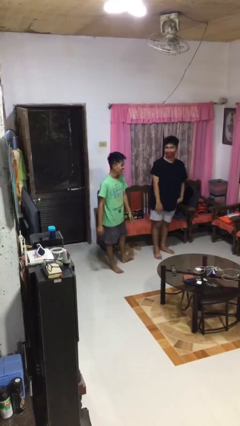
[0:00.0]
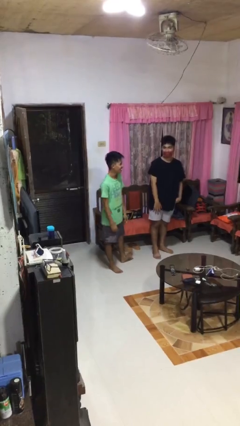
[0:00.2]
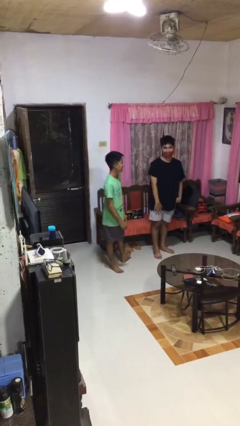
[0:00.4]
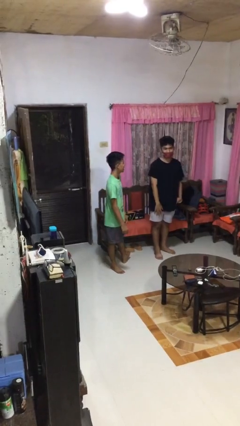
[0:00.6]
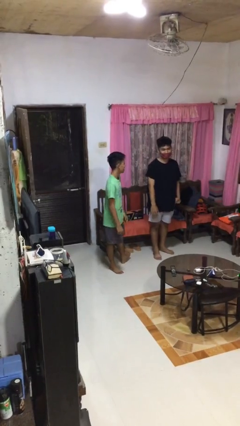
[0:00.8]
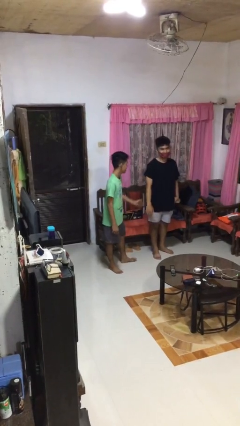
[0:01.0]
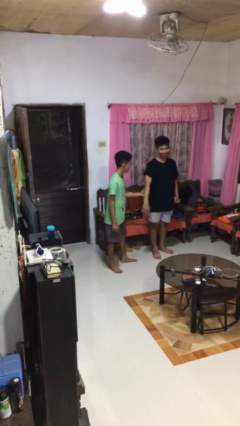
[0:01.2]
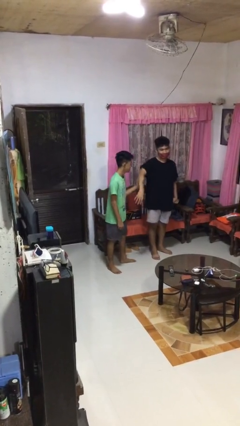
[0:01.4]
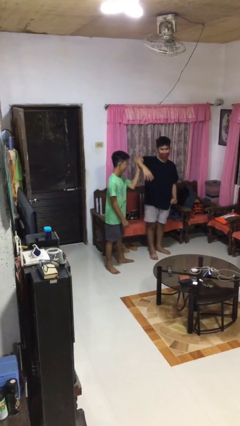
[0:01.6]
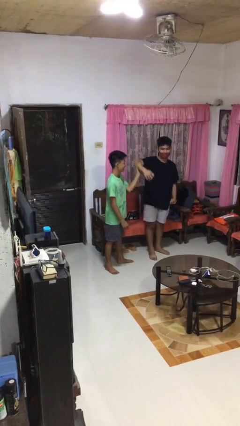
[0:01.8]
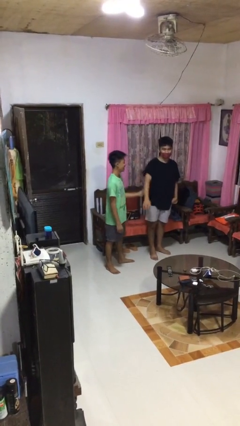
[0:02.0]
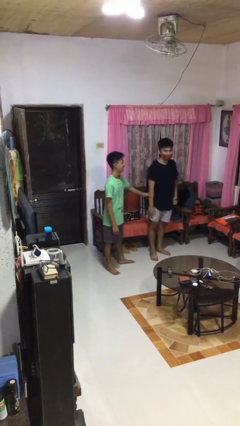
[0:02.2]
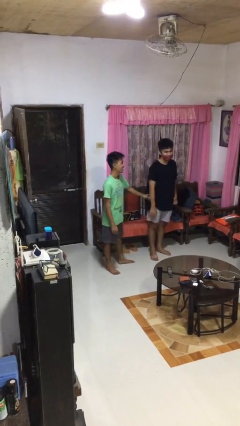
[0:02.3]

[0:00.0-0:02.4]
person grabs person by forearm

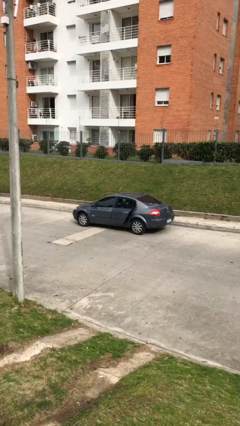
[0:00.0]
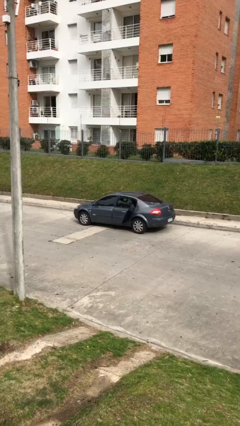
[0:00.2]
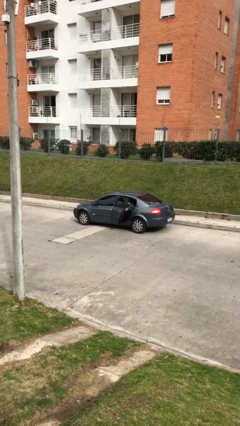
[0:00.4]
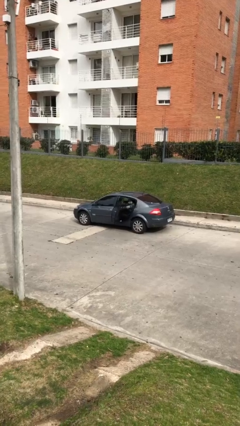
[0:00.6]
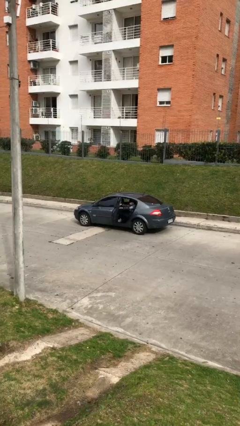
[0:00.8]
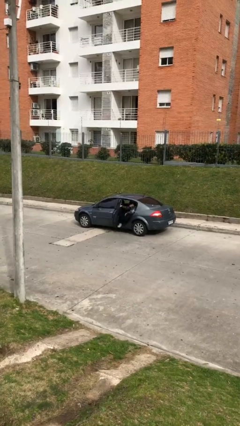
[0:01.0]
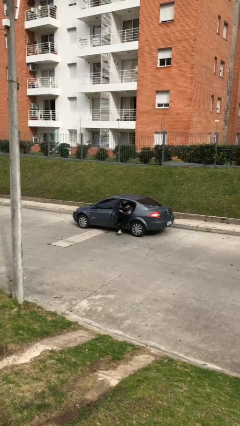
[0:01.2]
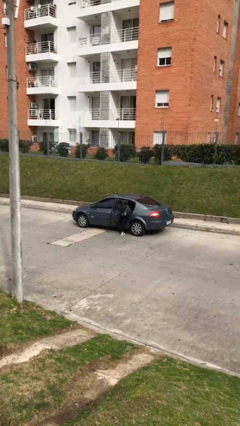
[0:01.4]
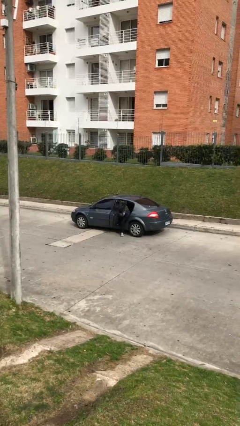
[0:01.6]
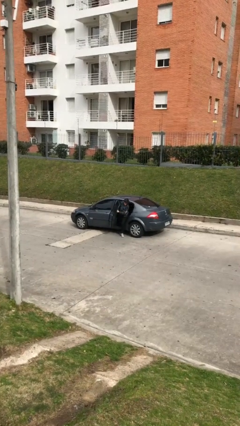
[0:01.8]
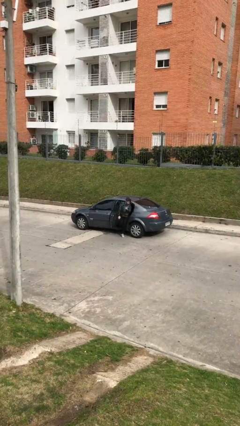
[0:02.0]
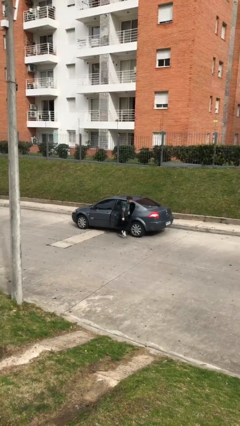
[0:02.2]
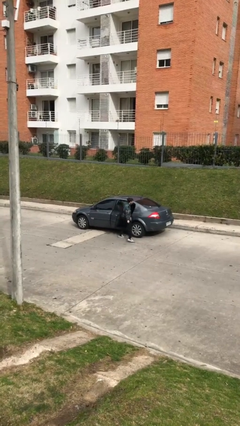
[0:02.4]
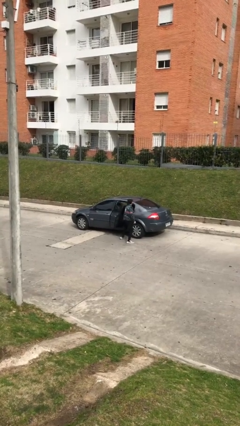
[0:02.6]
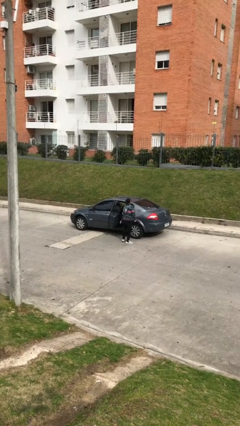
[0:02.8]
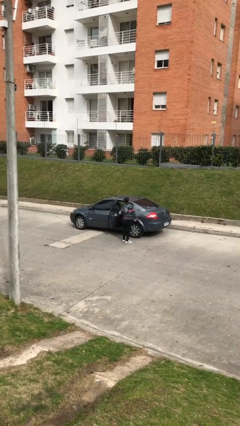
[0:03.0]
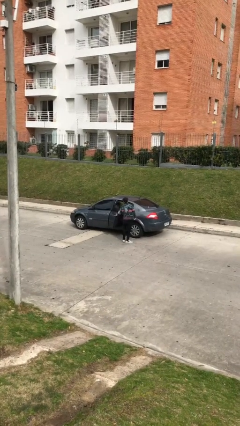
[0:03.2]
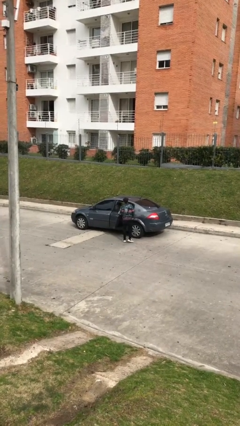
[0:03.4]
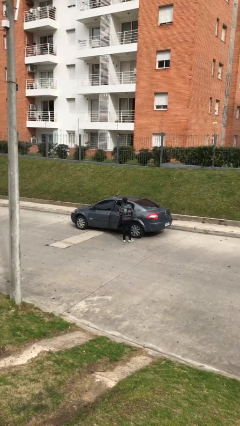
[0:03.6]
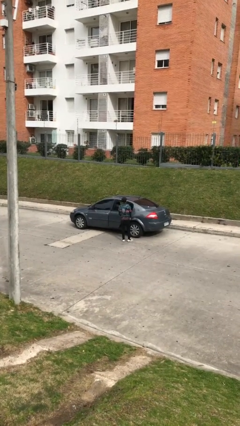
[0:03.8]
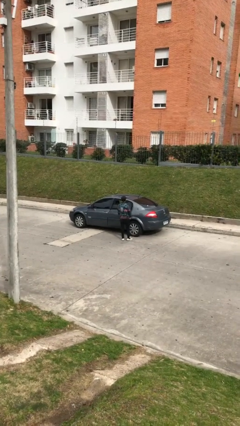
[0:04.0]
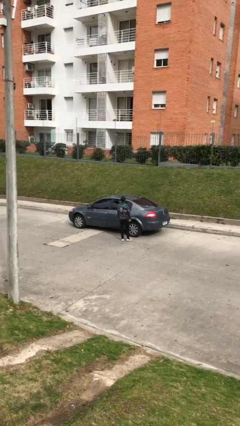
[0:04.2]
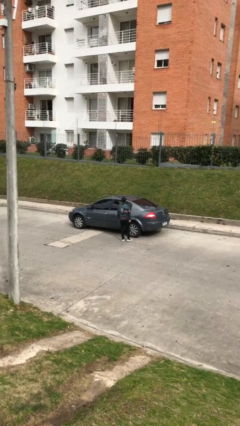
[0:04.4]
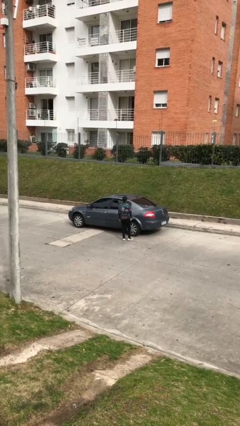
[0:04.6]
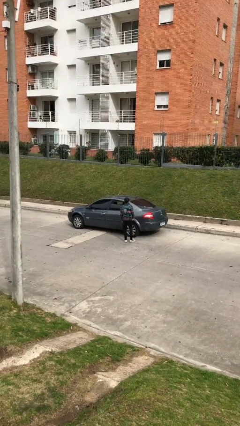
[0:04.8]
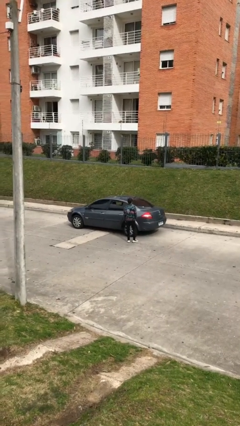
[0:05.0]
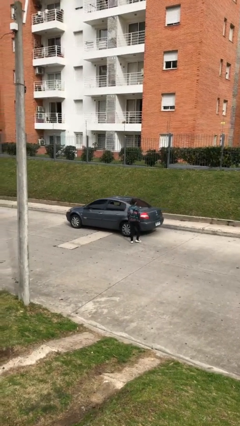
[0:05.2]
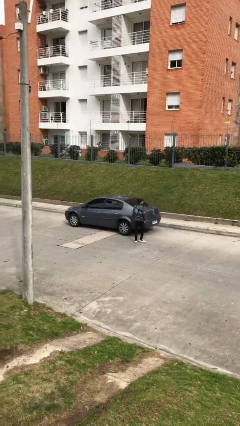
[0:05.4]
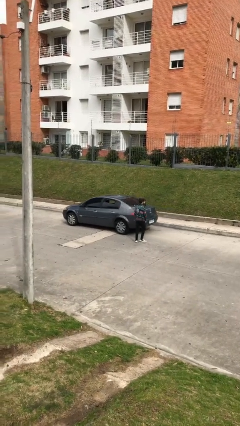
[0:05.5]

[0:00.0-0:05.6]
car drops off person

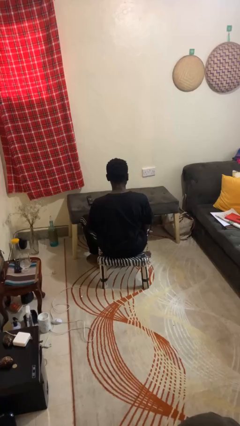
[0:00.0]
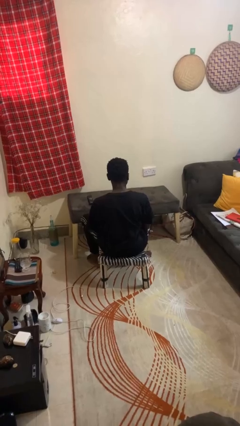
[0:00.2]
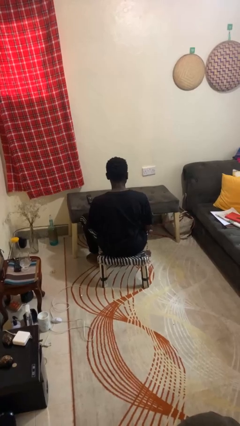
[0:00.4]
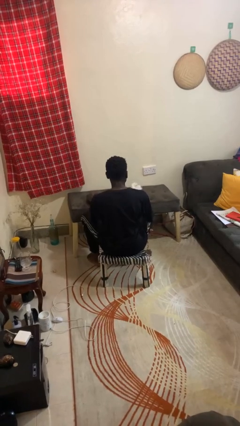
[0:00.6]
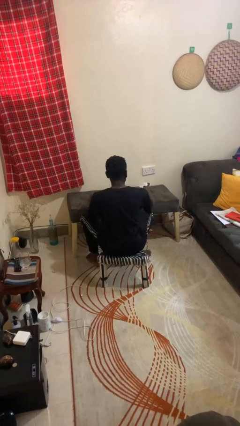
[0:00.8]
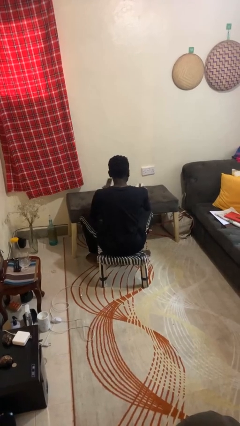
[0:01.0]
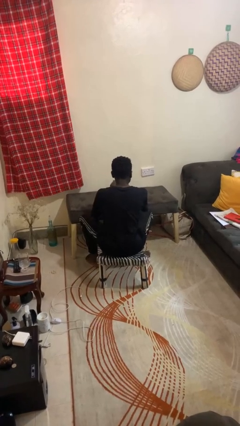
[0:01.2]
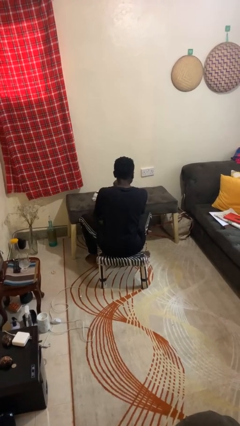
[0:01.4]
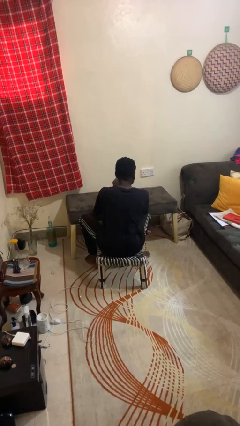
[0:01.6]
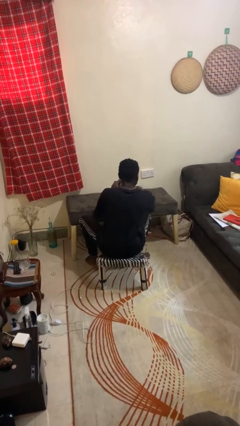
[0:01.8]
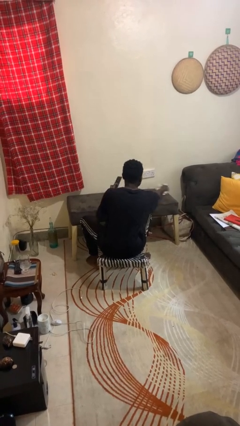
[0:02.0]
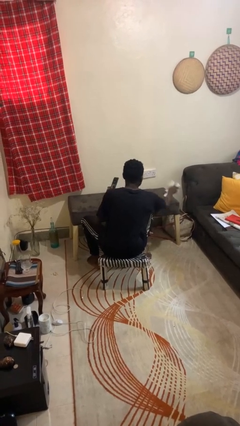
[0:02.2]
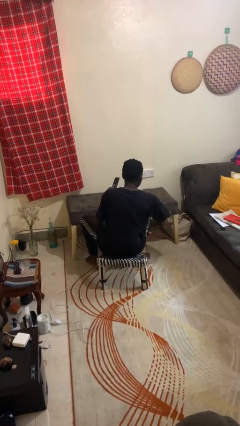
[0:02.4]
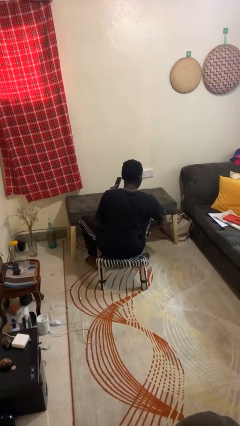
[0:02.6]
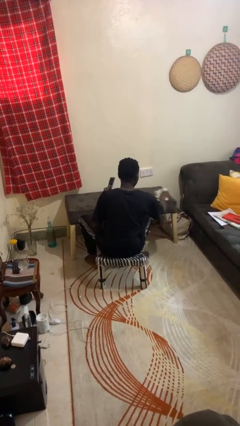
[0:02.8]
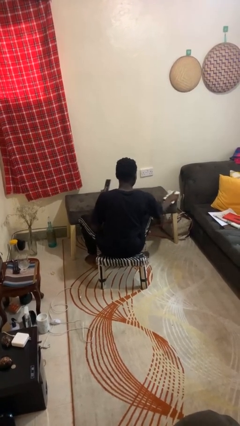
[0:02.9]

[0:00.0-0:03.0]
person cleans table with rag

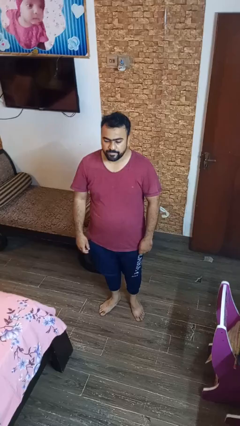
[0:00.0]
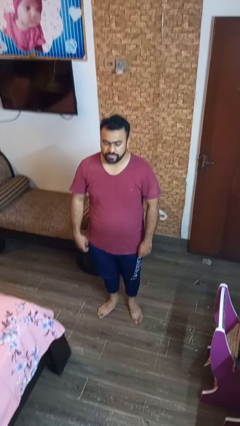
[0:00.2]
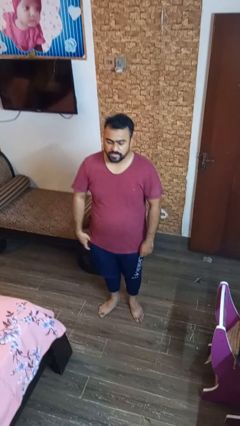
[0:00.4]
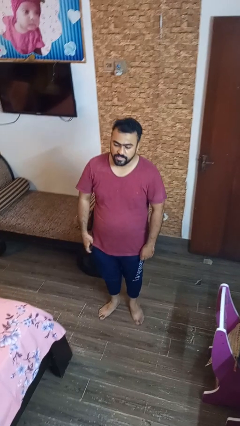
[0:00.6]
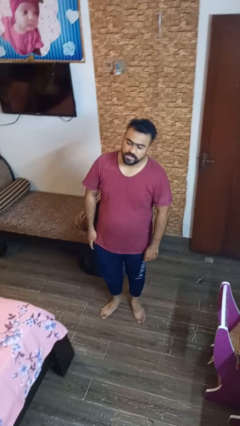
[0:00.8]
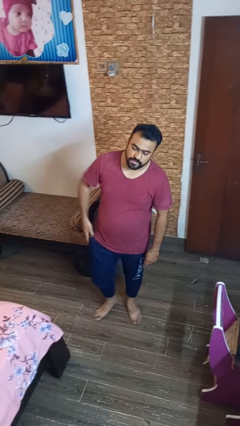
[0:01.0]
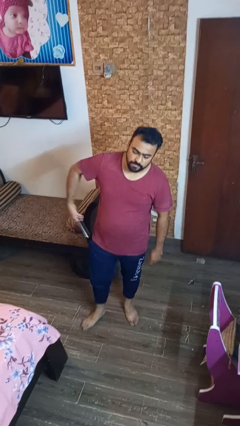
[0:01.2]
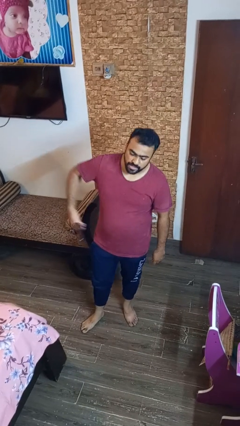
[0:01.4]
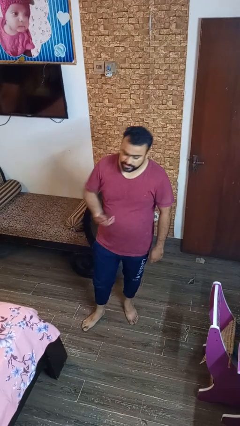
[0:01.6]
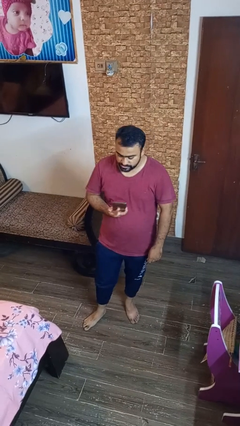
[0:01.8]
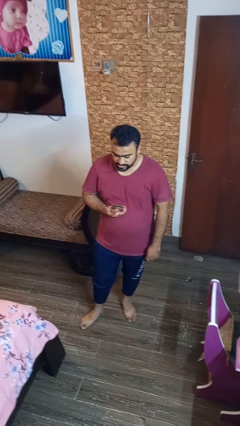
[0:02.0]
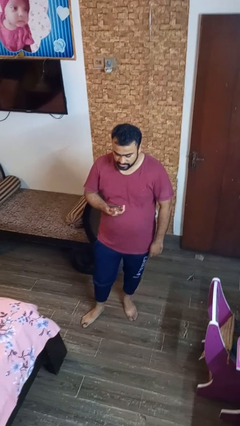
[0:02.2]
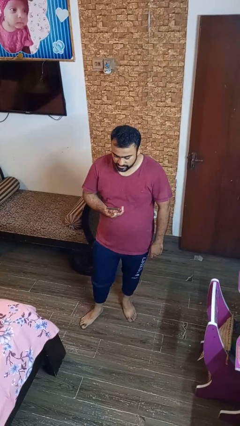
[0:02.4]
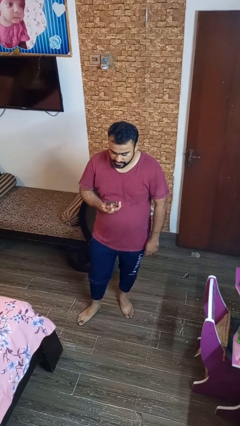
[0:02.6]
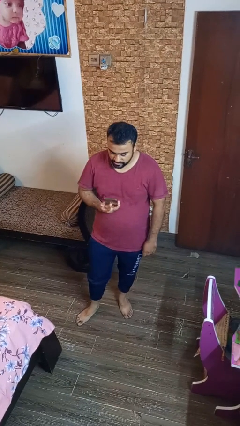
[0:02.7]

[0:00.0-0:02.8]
person takes phone from pocket

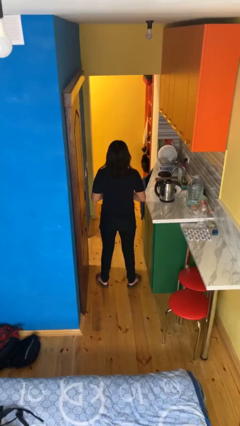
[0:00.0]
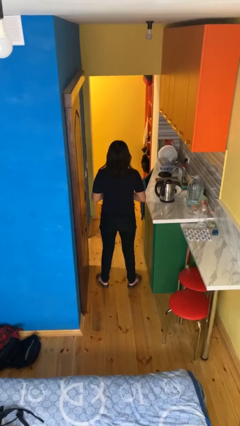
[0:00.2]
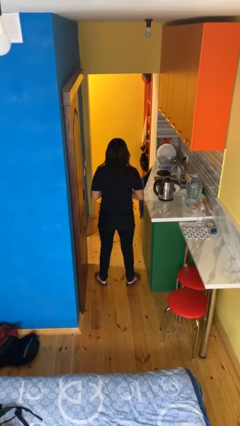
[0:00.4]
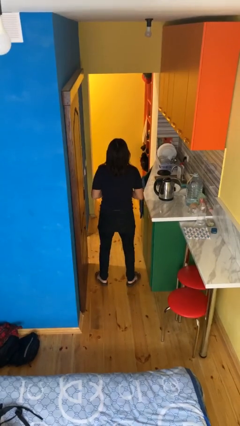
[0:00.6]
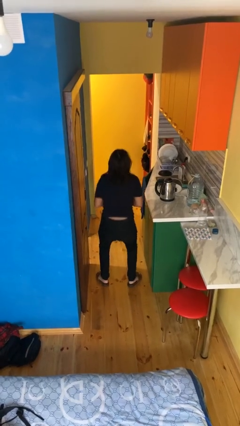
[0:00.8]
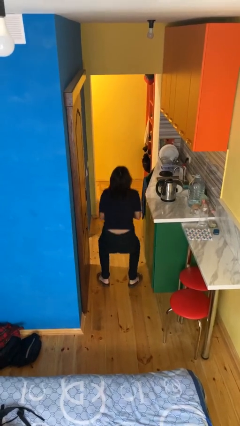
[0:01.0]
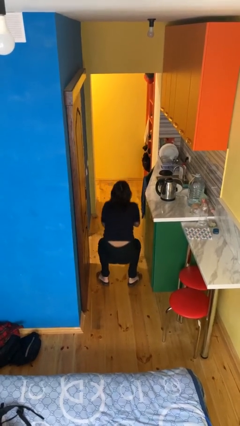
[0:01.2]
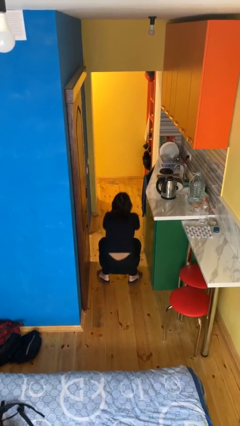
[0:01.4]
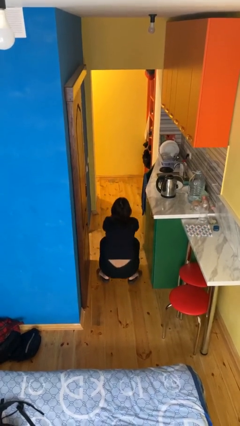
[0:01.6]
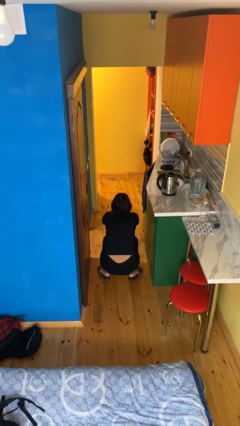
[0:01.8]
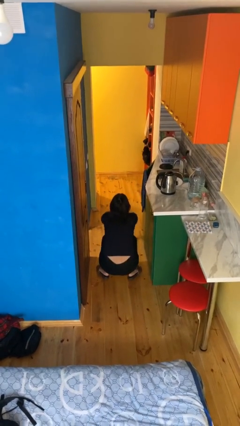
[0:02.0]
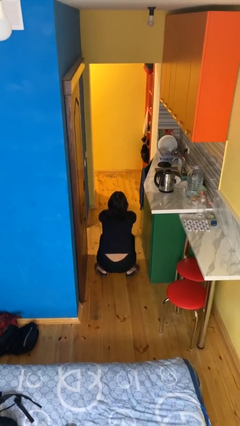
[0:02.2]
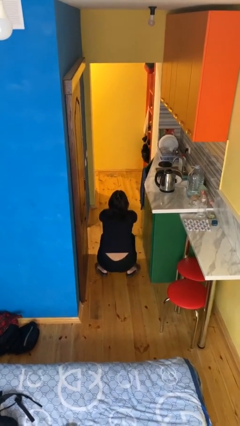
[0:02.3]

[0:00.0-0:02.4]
person squats

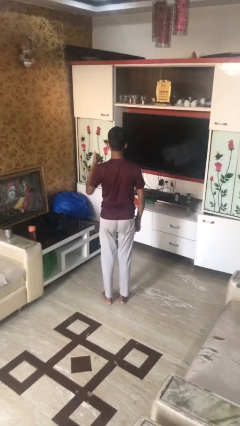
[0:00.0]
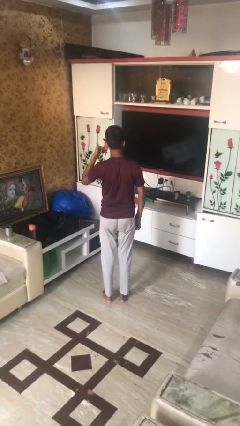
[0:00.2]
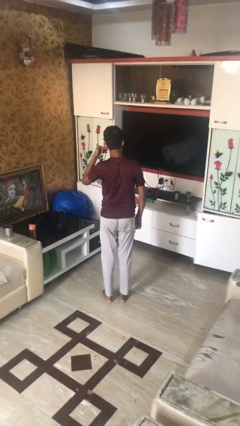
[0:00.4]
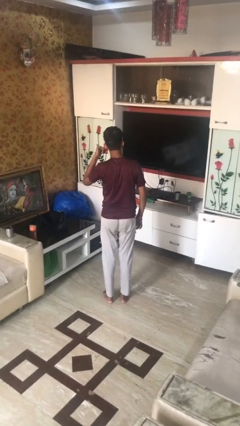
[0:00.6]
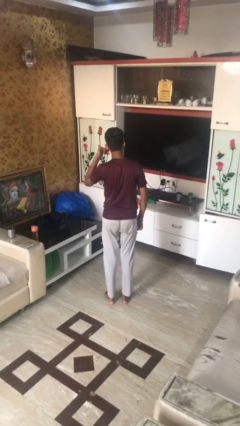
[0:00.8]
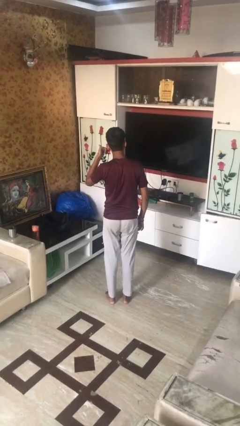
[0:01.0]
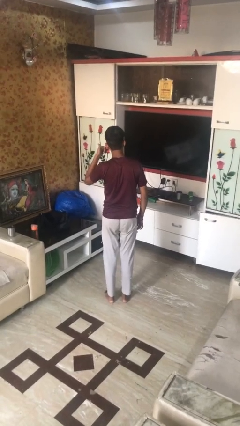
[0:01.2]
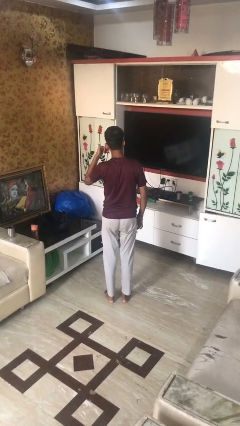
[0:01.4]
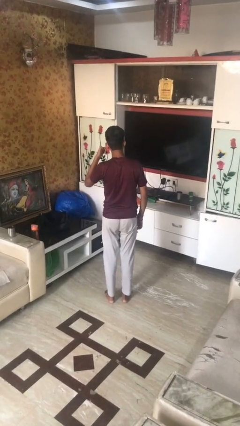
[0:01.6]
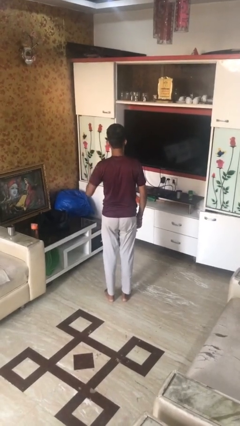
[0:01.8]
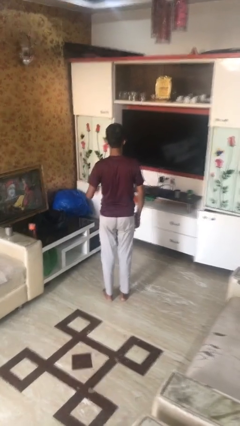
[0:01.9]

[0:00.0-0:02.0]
person gestures call me
